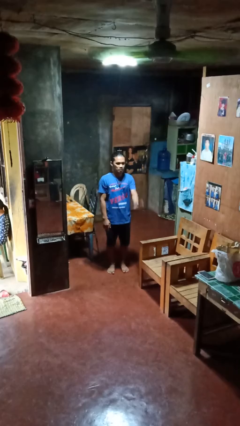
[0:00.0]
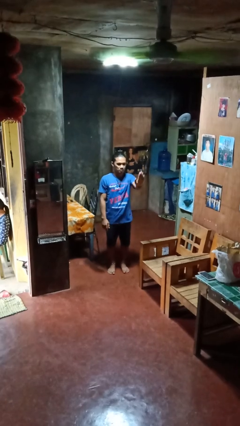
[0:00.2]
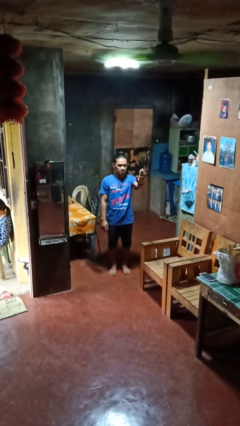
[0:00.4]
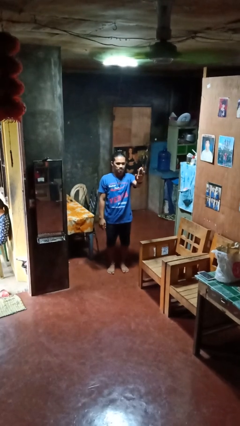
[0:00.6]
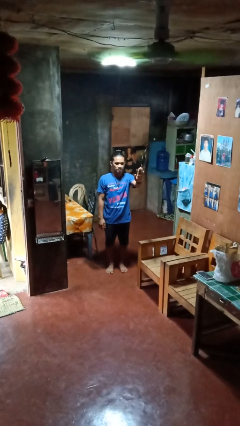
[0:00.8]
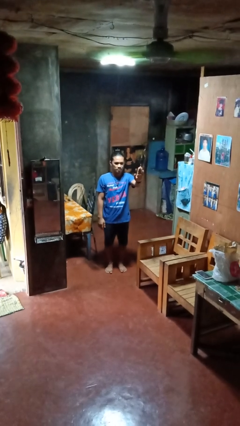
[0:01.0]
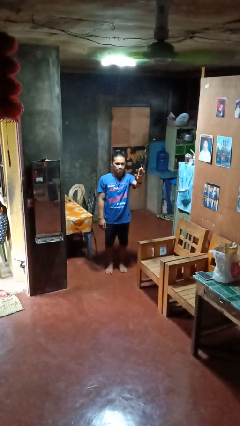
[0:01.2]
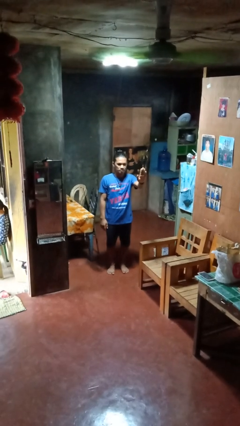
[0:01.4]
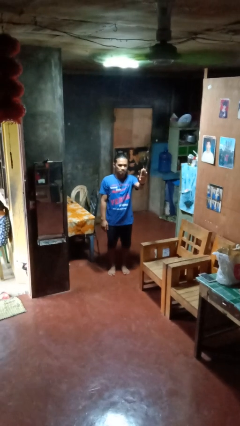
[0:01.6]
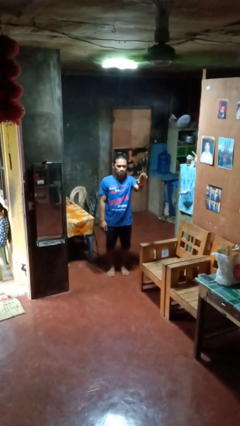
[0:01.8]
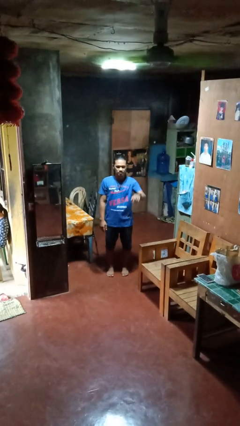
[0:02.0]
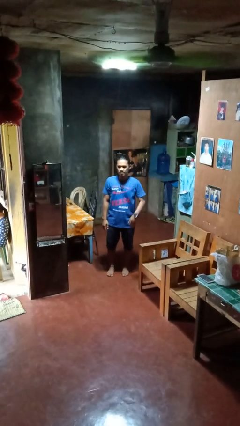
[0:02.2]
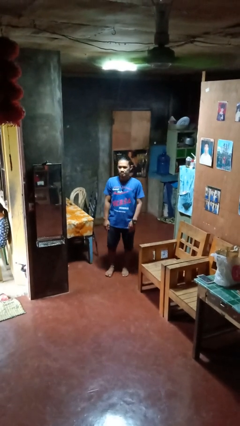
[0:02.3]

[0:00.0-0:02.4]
person gestures stop

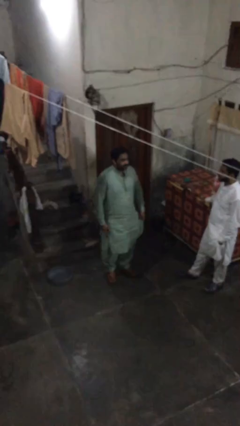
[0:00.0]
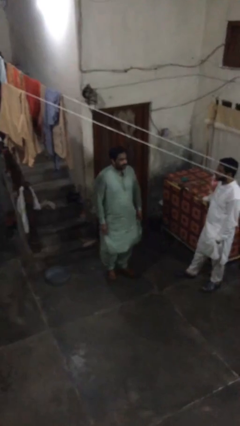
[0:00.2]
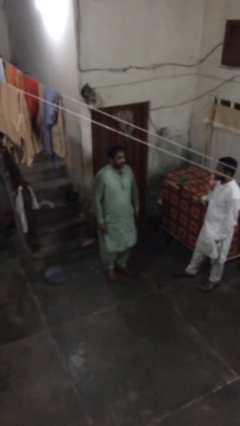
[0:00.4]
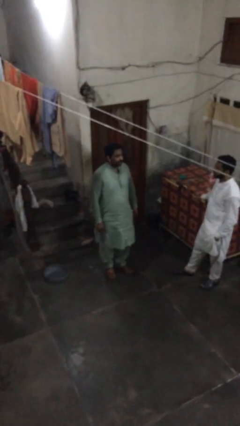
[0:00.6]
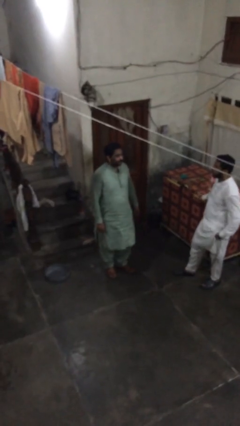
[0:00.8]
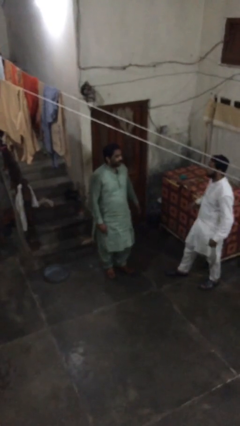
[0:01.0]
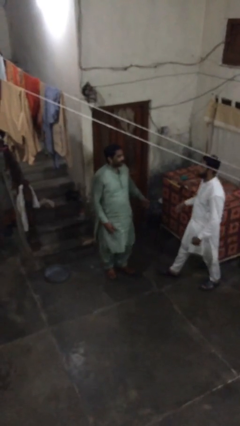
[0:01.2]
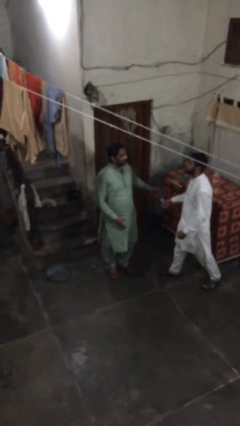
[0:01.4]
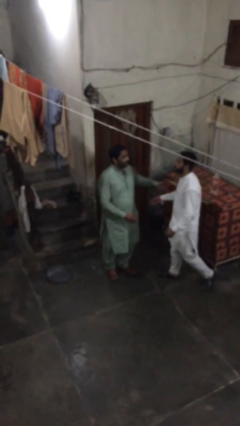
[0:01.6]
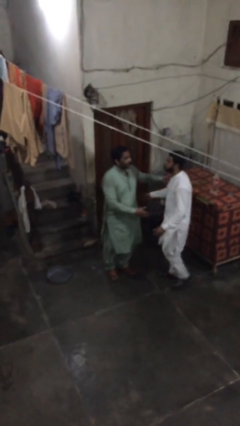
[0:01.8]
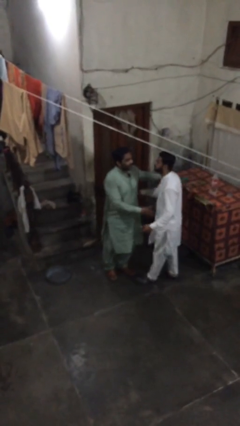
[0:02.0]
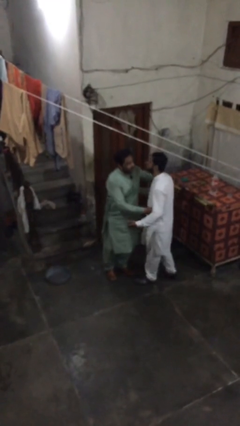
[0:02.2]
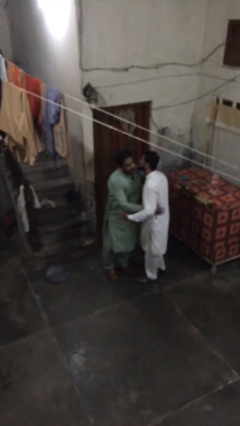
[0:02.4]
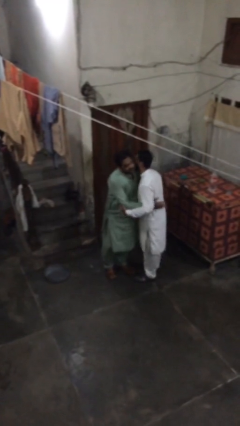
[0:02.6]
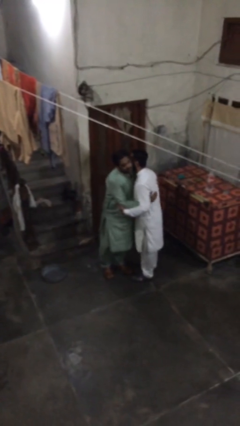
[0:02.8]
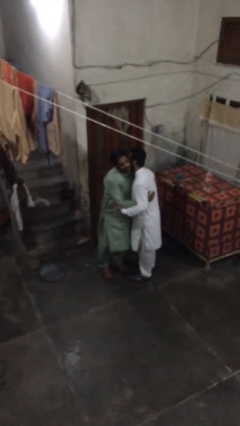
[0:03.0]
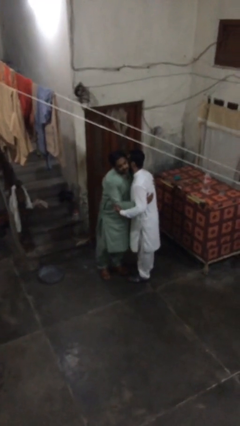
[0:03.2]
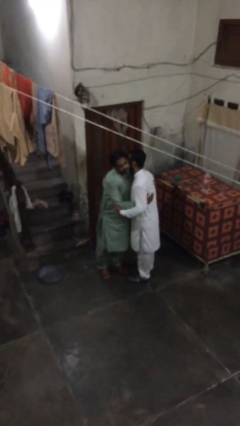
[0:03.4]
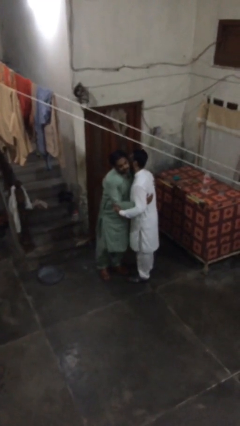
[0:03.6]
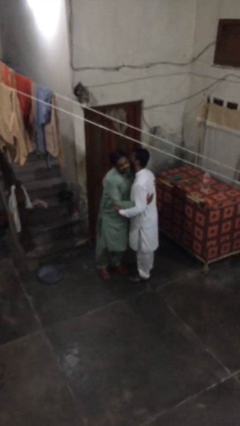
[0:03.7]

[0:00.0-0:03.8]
person embraces person

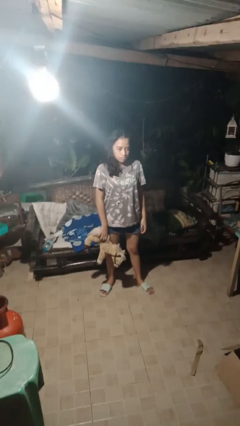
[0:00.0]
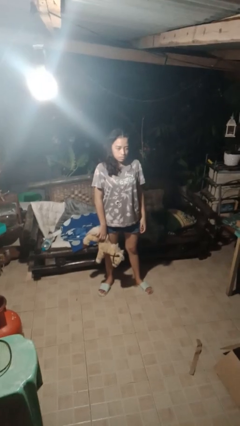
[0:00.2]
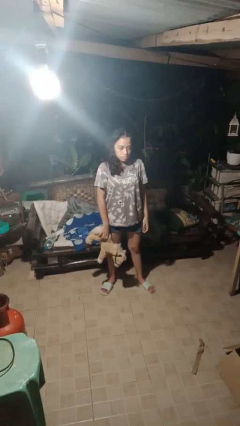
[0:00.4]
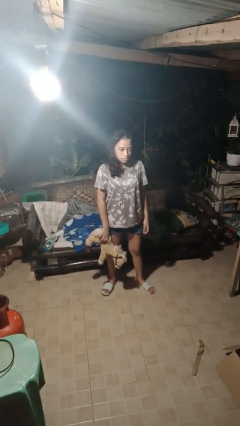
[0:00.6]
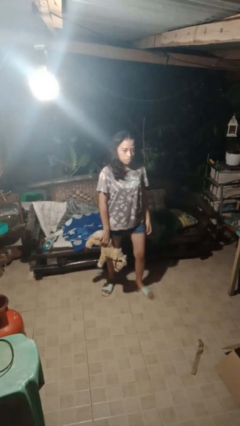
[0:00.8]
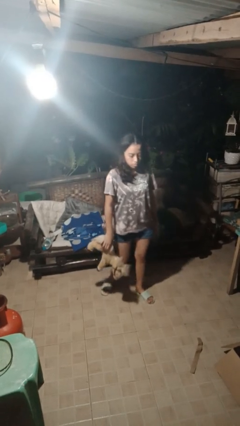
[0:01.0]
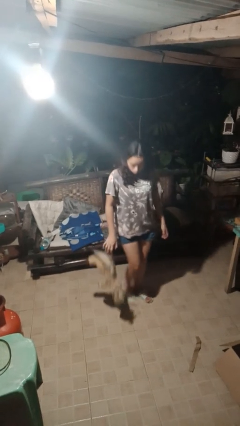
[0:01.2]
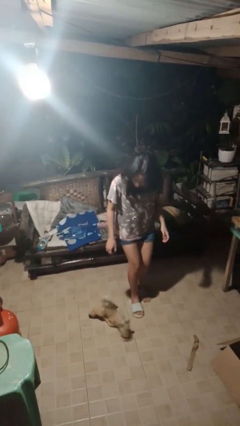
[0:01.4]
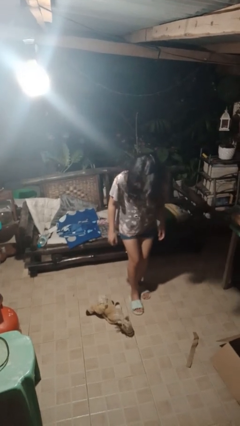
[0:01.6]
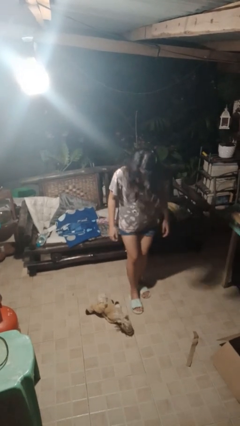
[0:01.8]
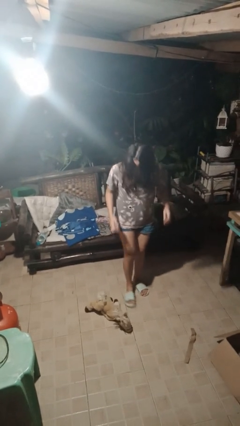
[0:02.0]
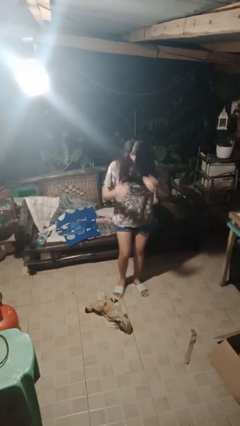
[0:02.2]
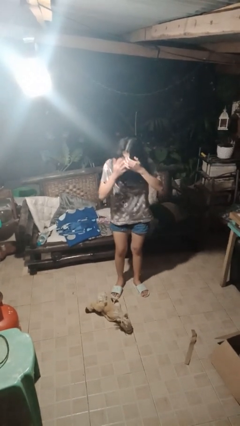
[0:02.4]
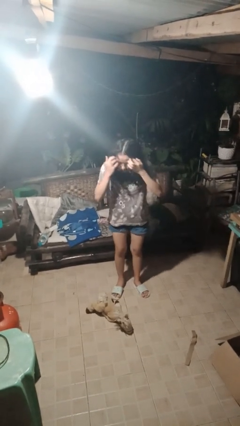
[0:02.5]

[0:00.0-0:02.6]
person drops object

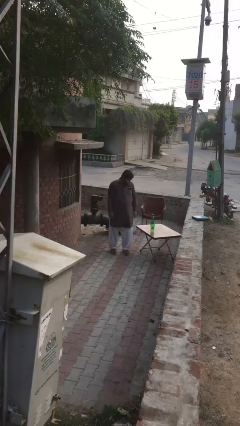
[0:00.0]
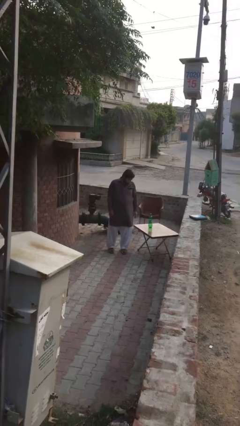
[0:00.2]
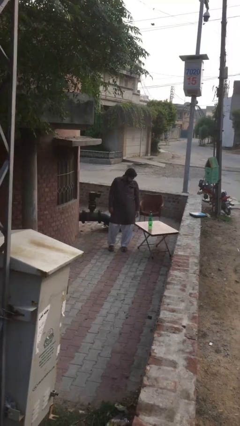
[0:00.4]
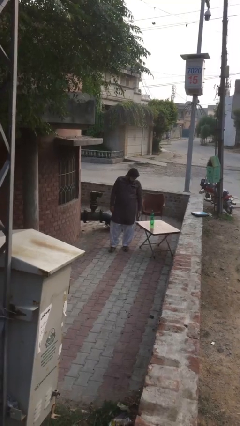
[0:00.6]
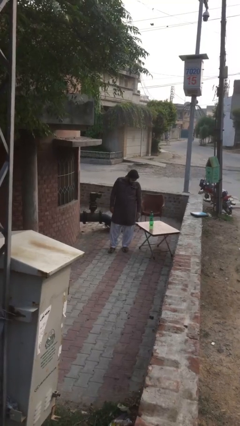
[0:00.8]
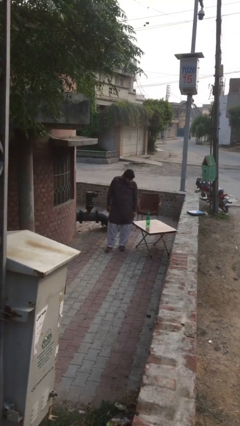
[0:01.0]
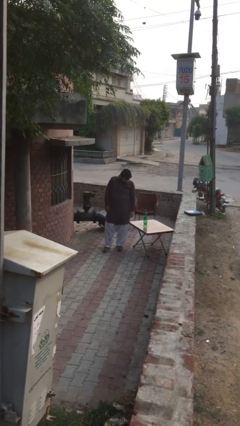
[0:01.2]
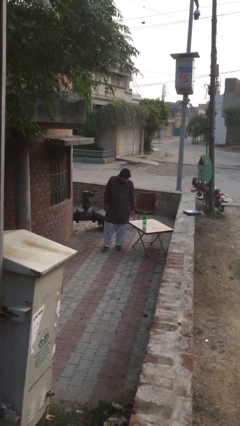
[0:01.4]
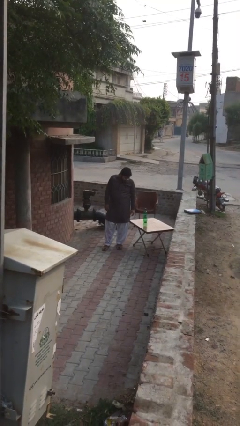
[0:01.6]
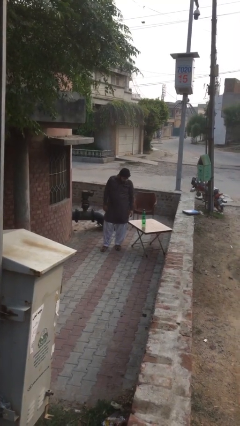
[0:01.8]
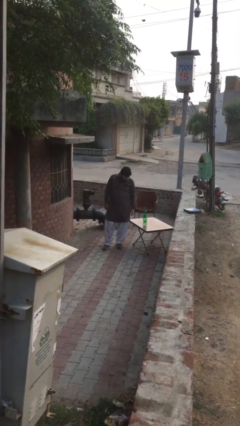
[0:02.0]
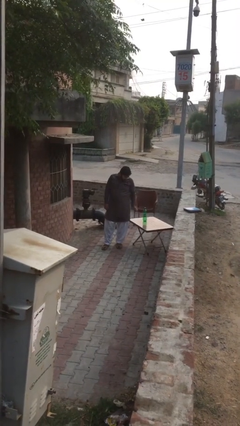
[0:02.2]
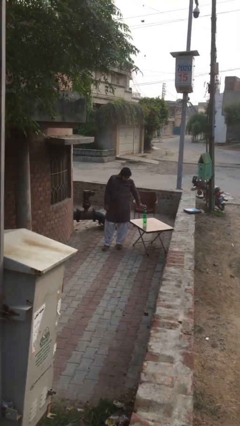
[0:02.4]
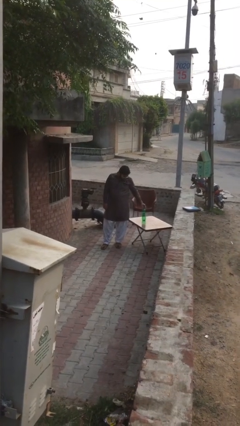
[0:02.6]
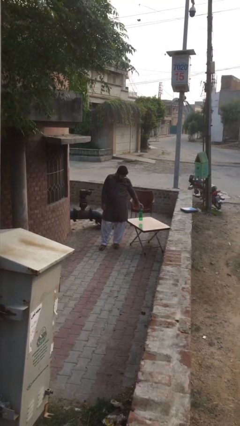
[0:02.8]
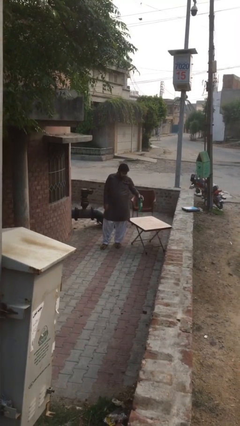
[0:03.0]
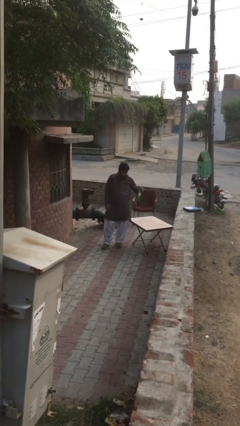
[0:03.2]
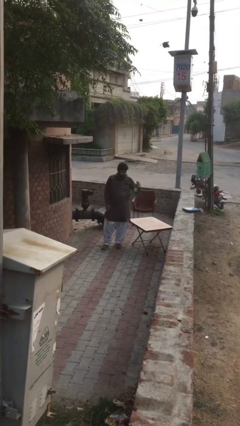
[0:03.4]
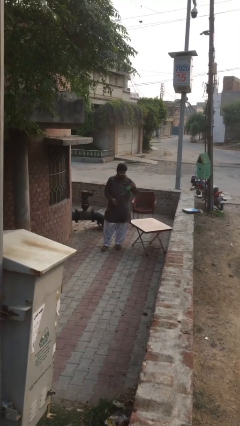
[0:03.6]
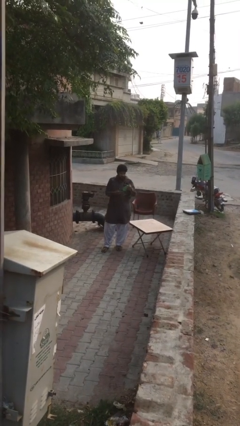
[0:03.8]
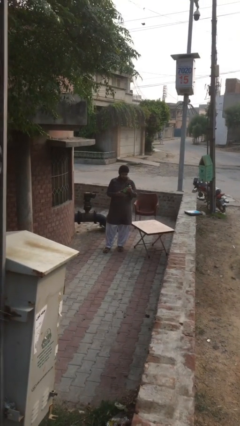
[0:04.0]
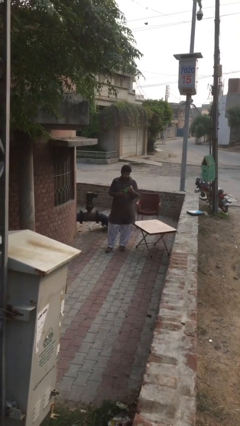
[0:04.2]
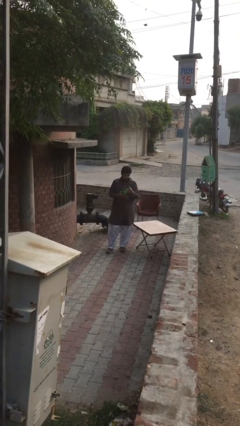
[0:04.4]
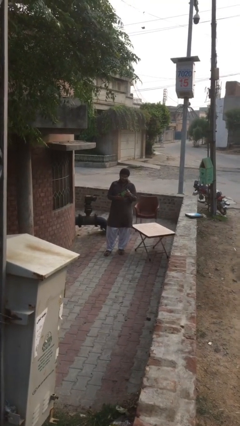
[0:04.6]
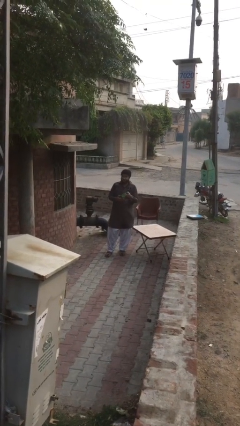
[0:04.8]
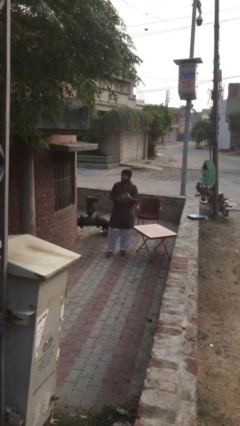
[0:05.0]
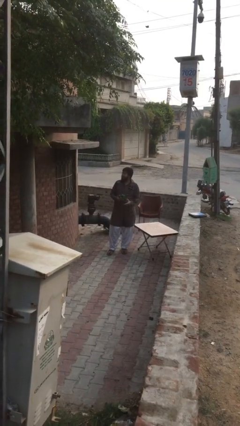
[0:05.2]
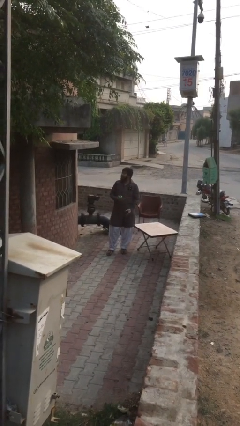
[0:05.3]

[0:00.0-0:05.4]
person picks up object from table

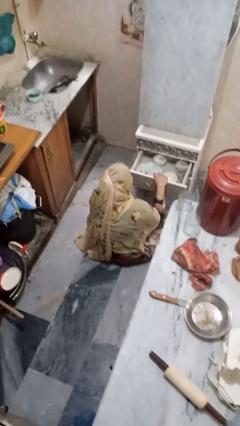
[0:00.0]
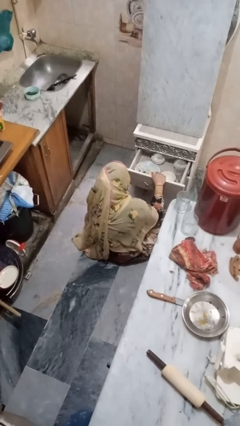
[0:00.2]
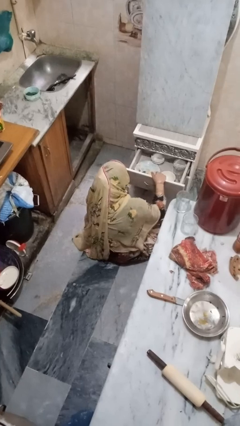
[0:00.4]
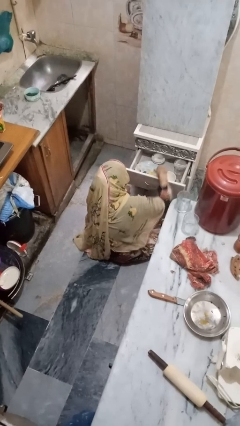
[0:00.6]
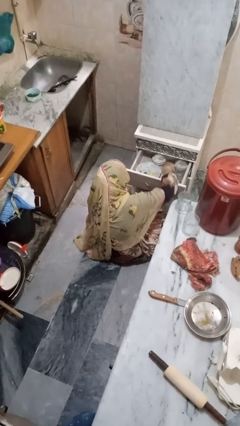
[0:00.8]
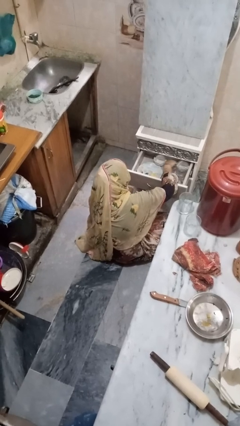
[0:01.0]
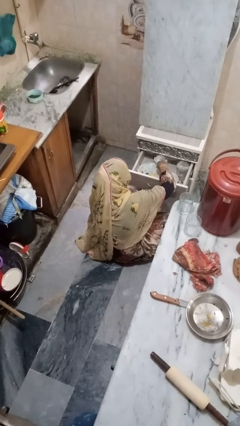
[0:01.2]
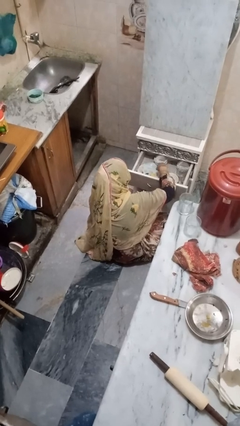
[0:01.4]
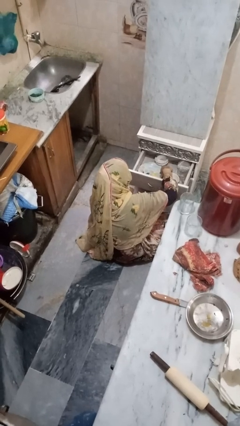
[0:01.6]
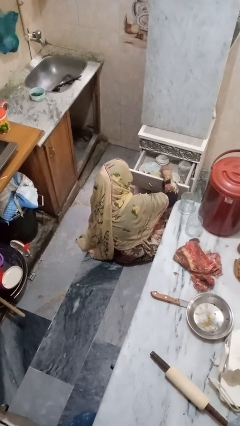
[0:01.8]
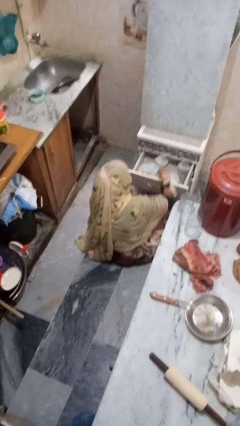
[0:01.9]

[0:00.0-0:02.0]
person searches in kitchen drawer

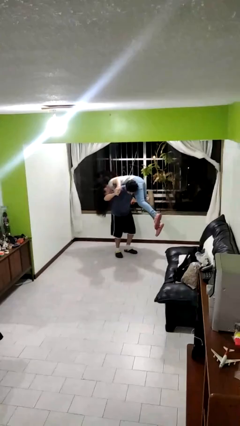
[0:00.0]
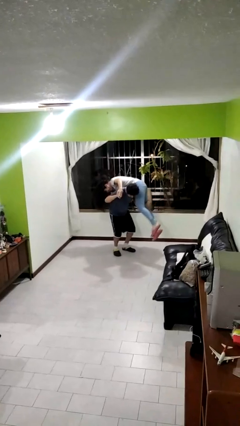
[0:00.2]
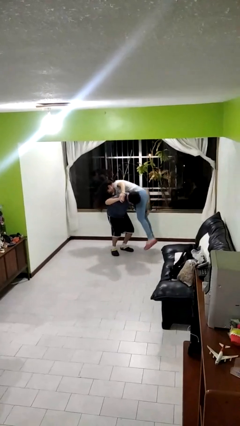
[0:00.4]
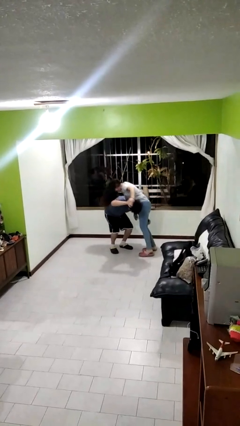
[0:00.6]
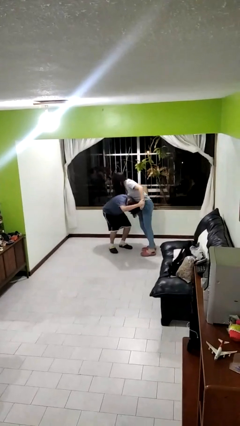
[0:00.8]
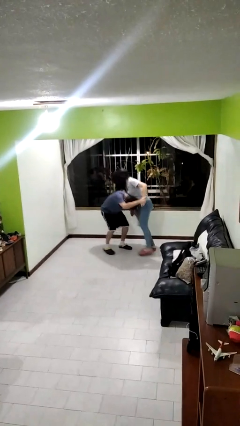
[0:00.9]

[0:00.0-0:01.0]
person puts down person

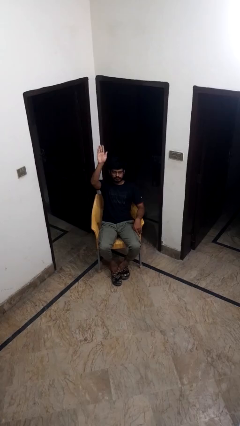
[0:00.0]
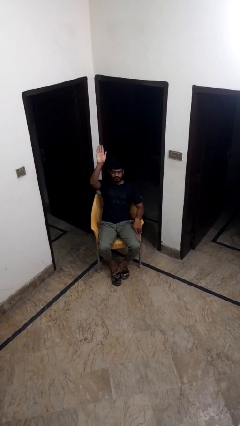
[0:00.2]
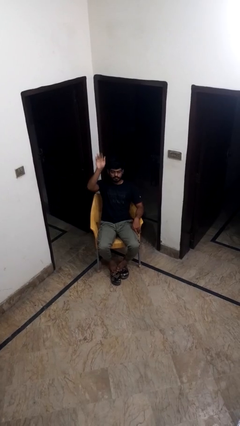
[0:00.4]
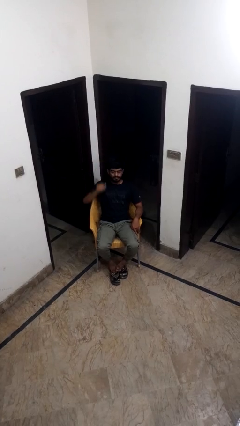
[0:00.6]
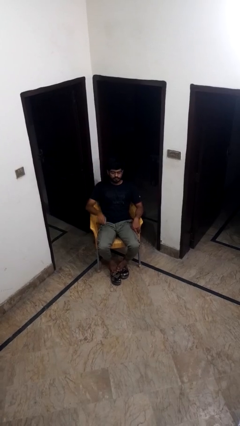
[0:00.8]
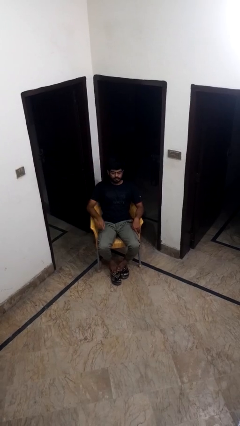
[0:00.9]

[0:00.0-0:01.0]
person gestures lower hand
